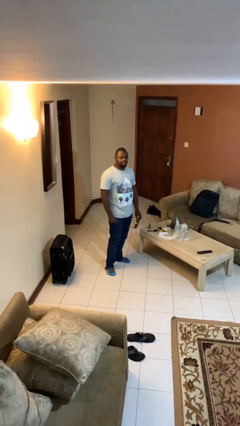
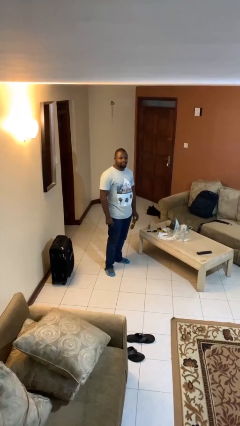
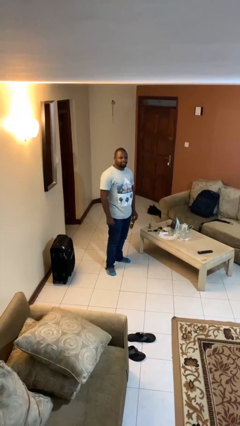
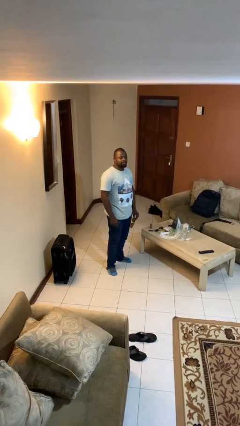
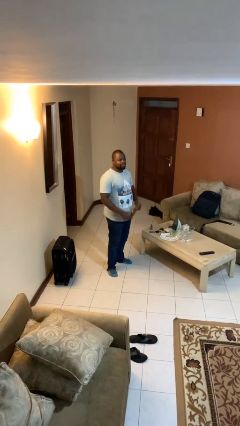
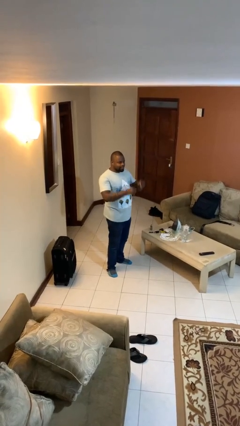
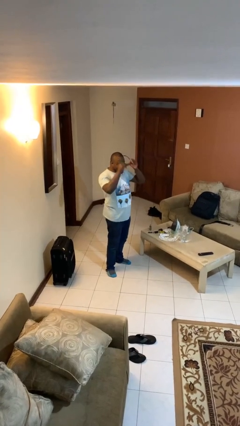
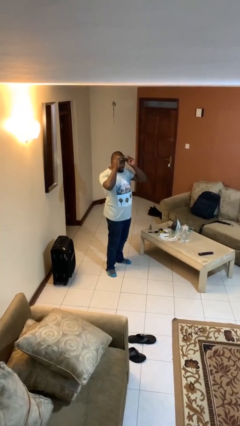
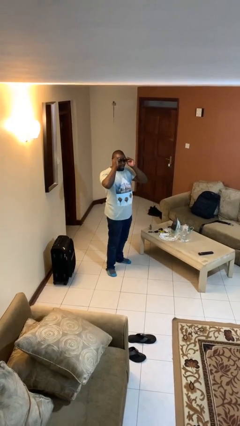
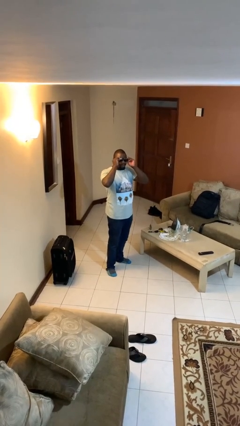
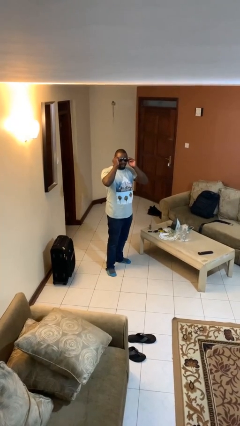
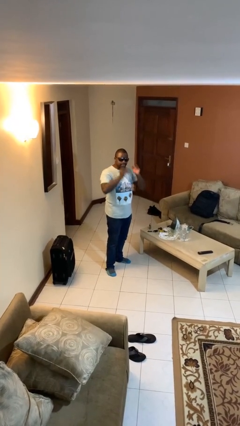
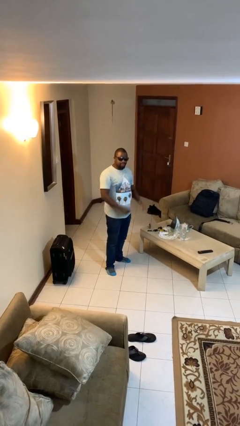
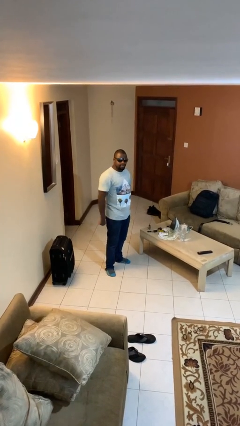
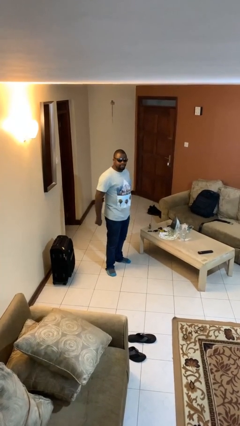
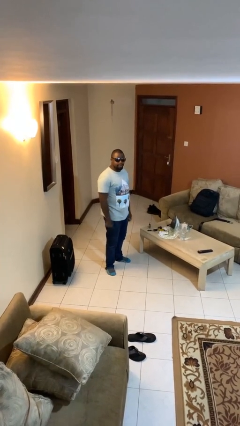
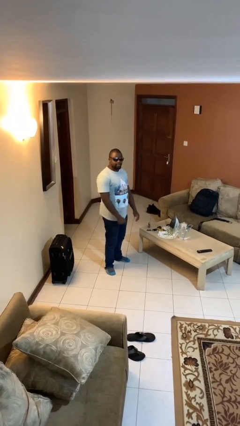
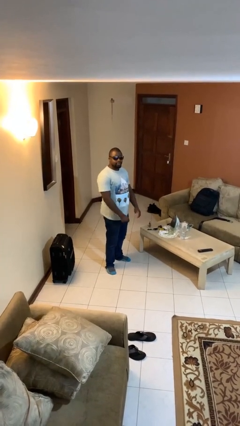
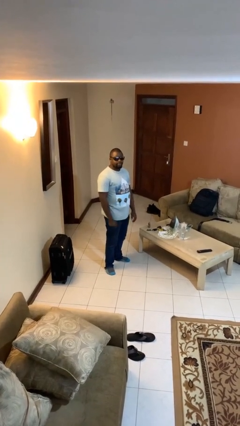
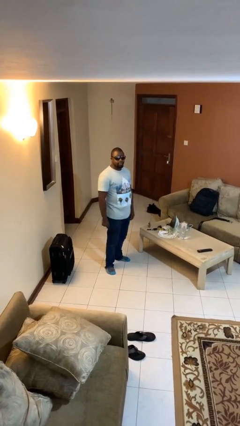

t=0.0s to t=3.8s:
person puts on sunglasses

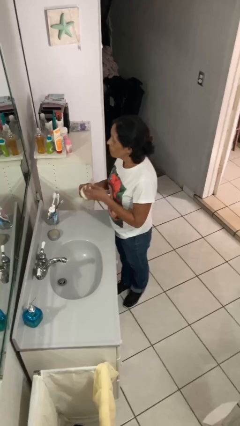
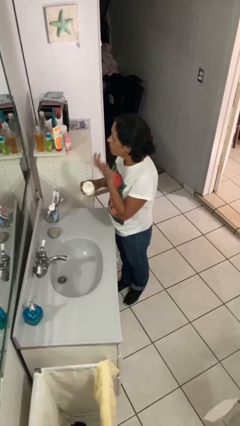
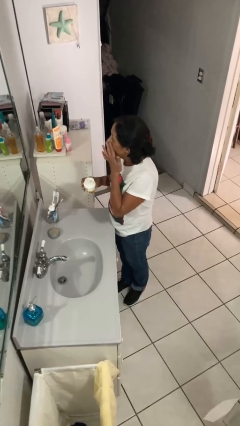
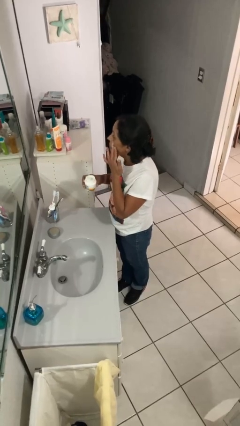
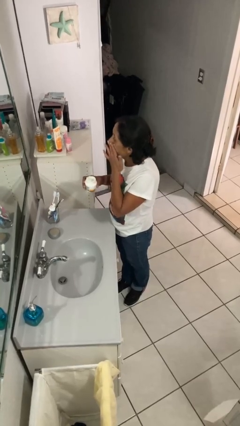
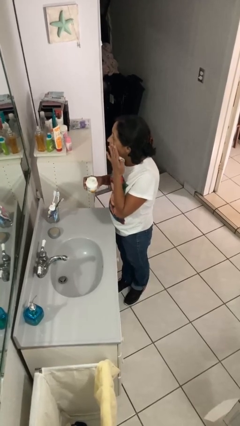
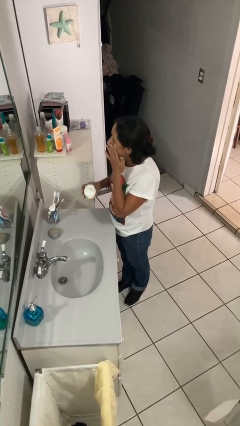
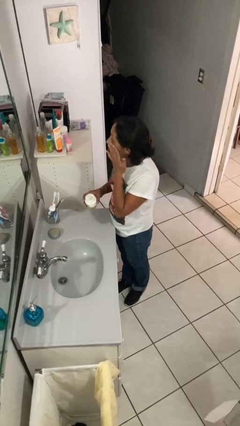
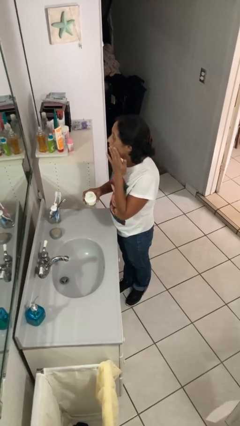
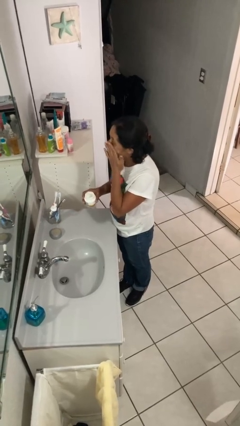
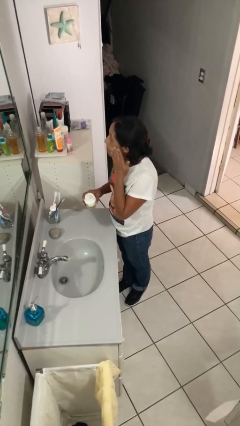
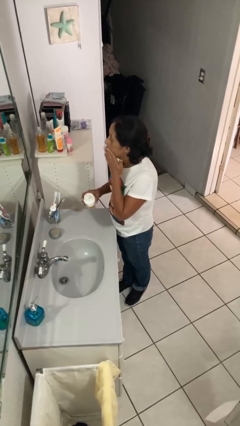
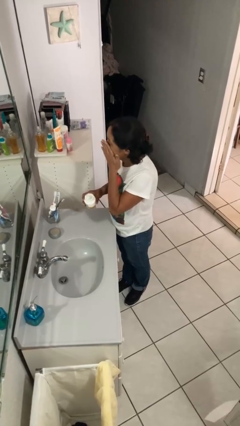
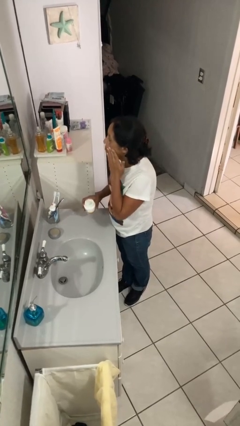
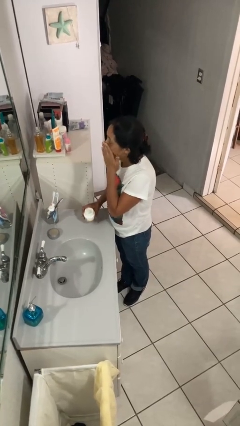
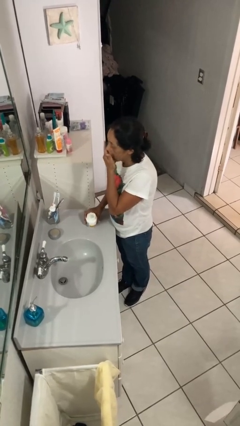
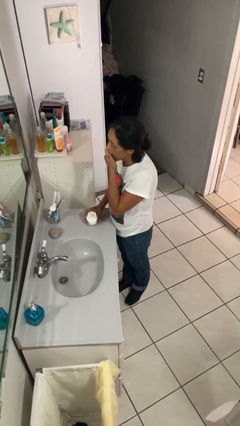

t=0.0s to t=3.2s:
person applies facial moisturizer

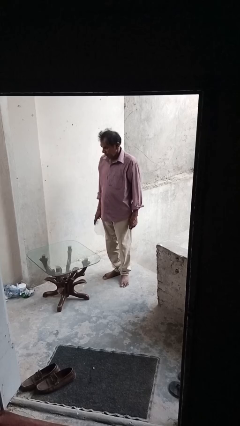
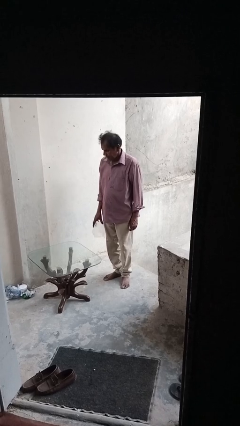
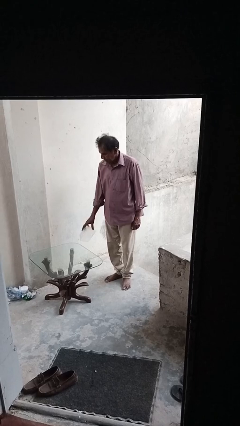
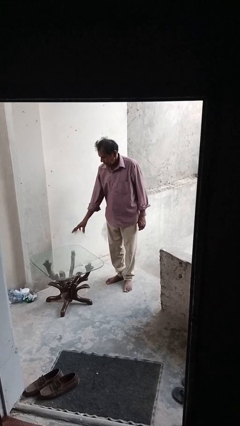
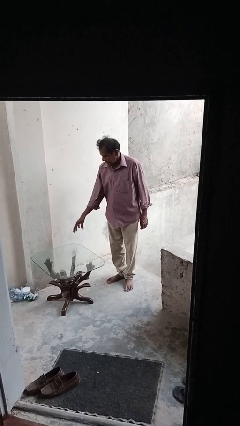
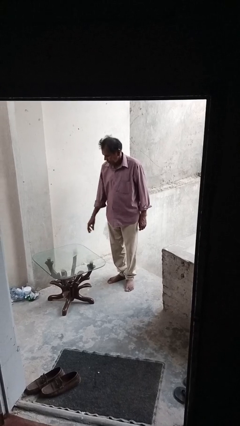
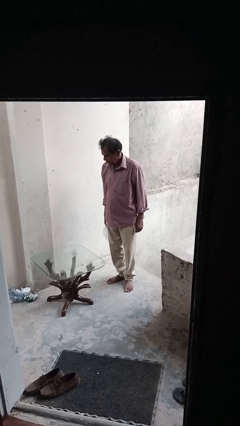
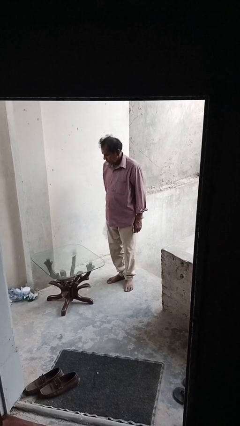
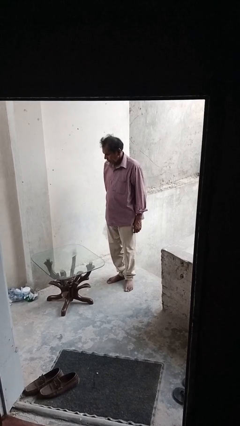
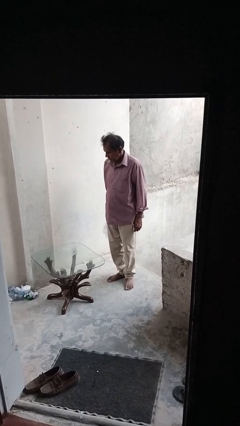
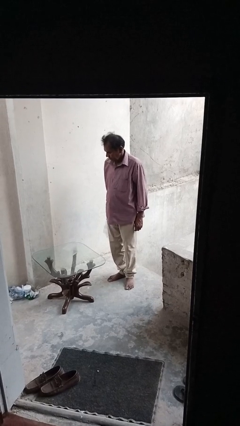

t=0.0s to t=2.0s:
person throws object on table

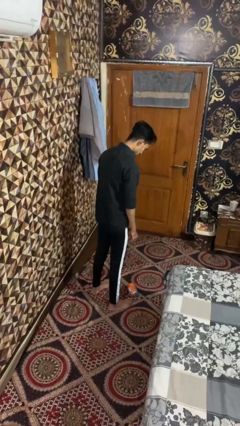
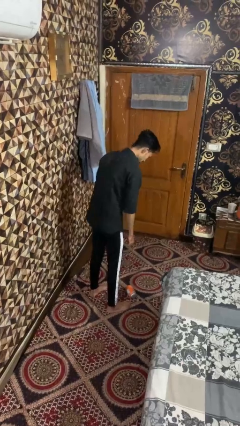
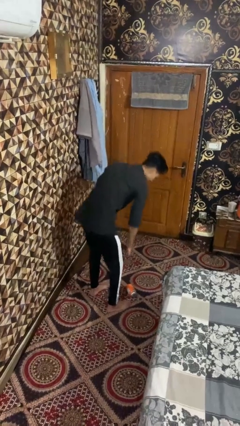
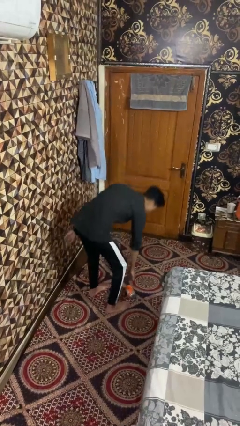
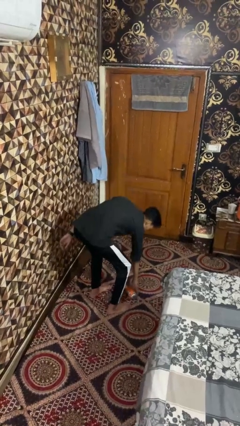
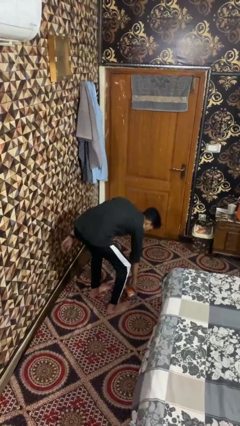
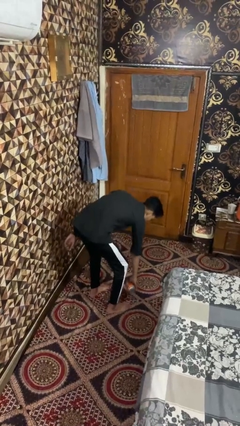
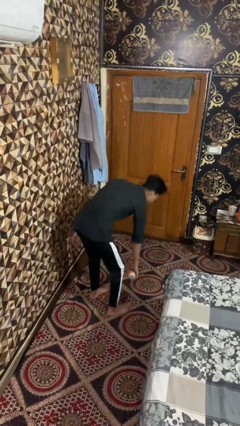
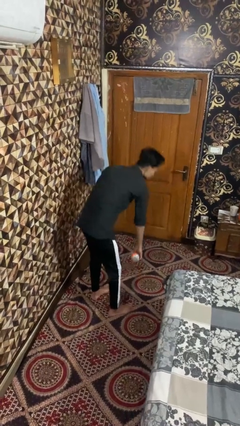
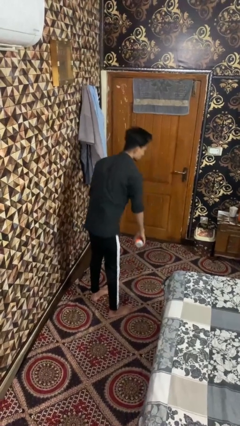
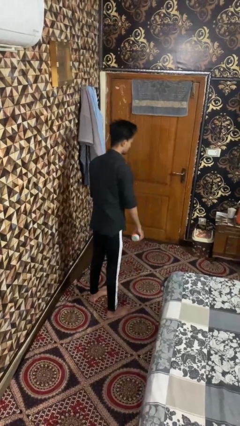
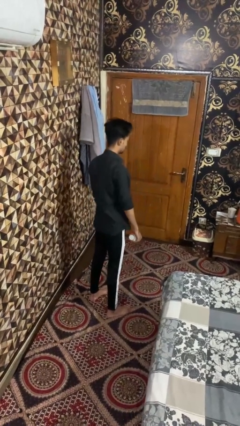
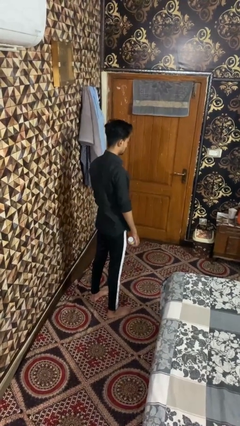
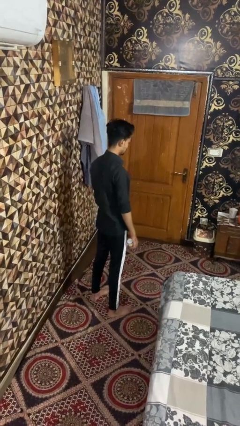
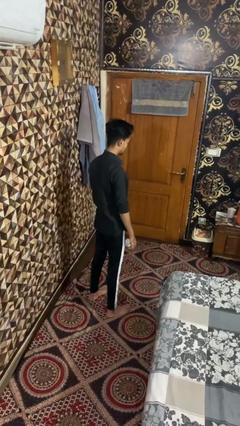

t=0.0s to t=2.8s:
person stands up from floor

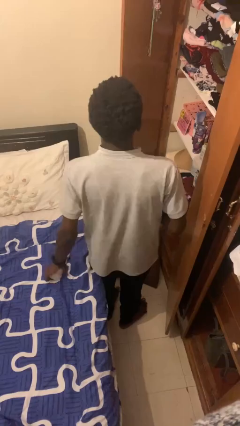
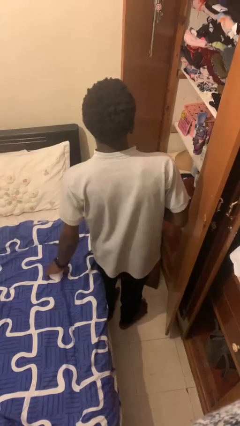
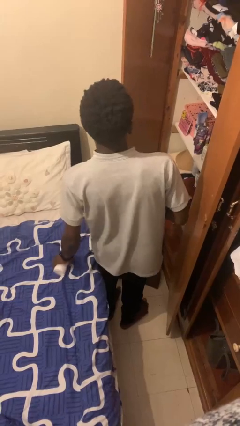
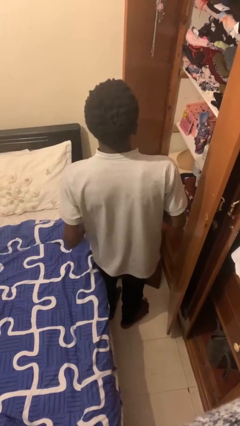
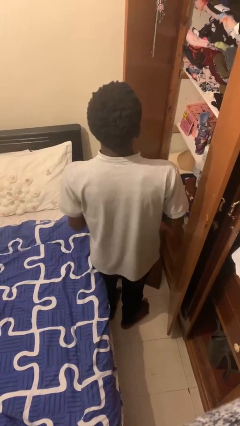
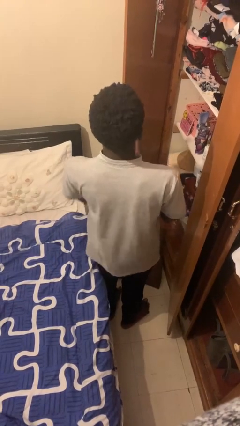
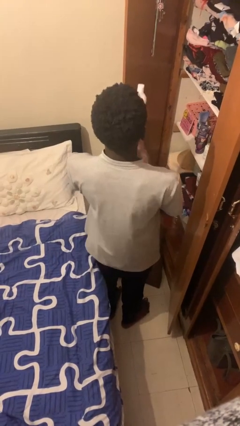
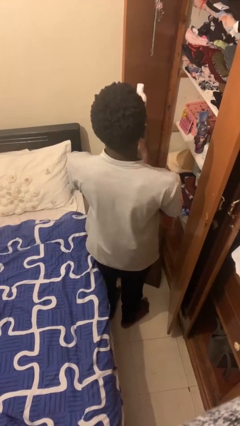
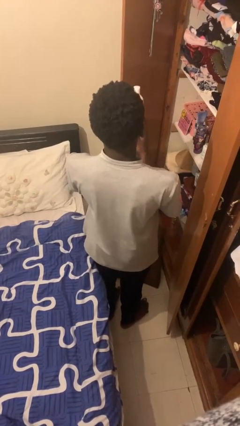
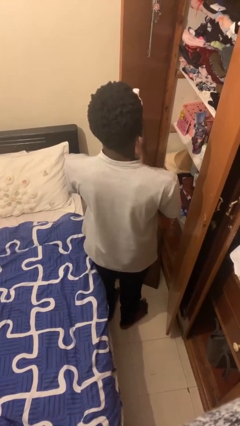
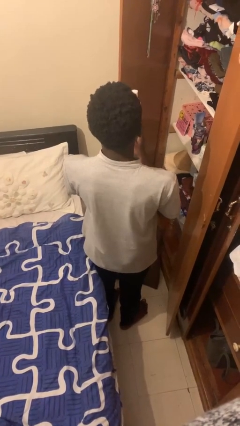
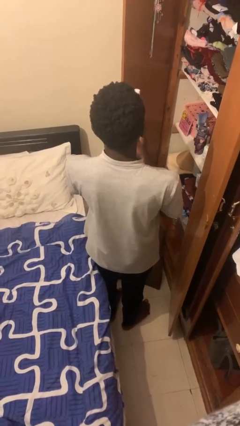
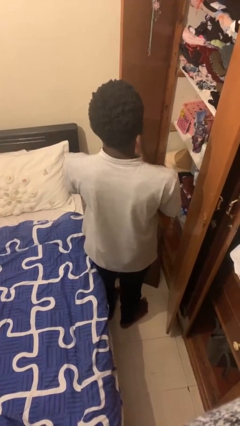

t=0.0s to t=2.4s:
person picks up object from cabinet

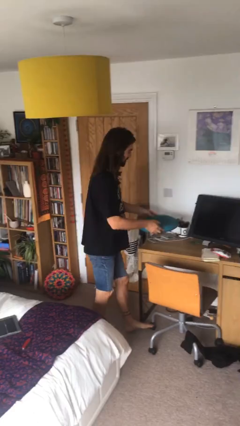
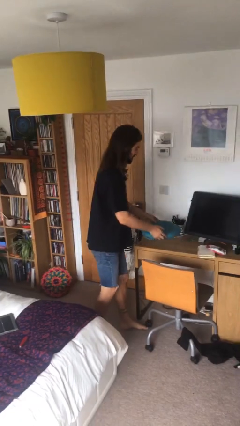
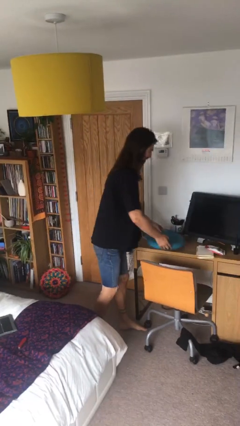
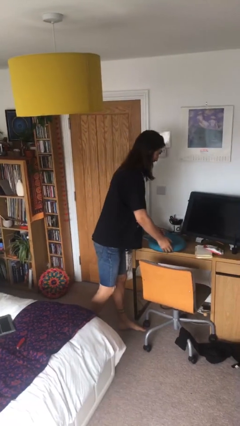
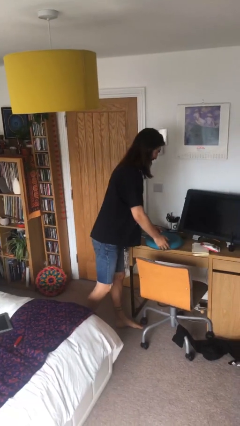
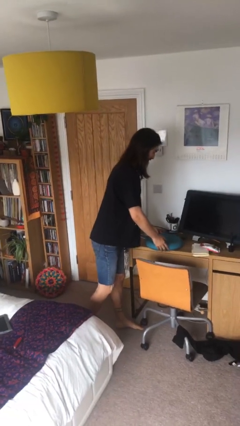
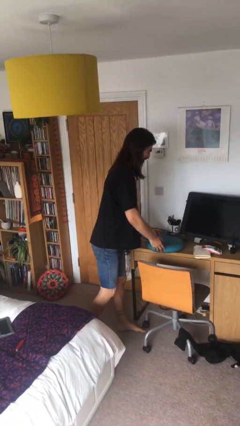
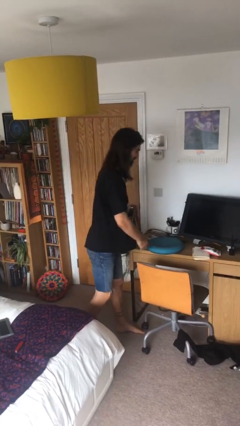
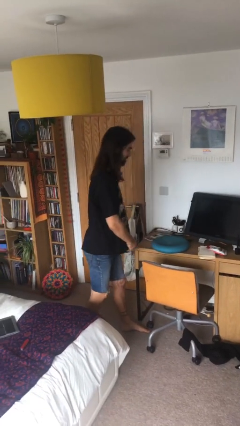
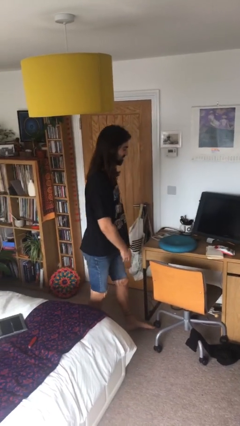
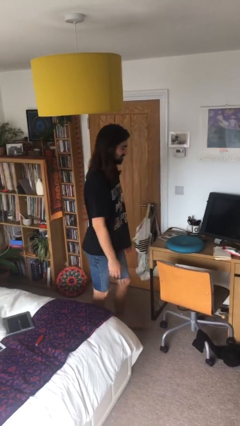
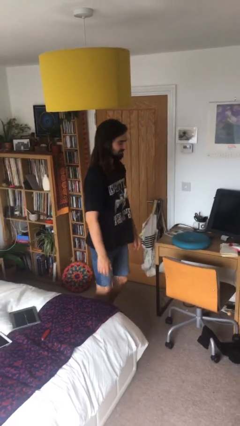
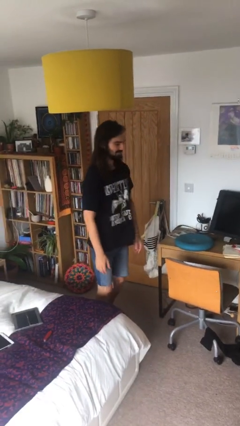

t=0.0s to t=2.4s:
person puts down object on table

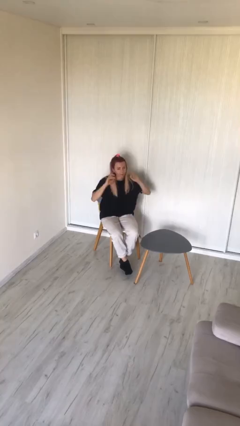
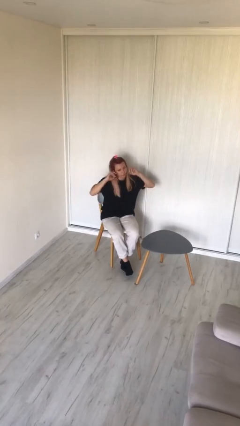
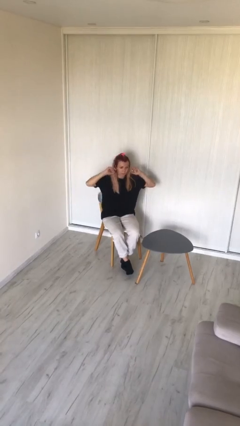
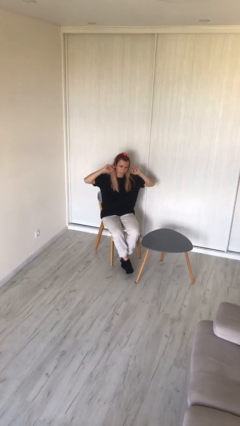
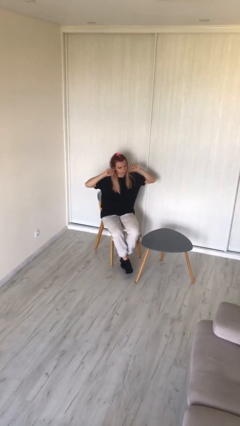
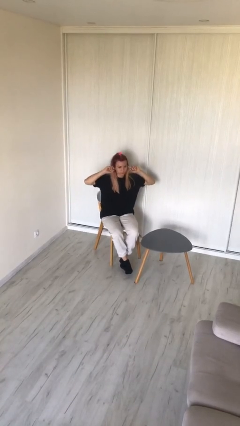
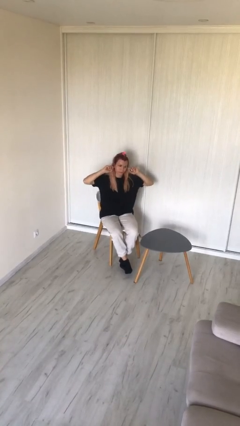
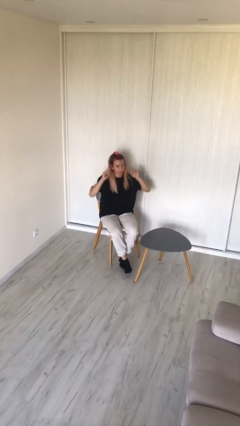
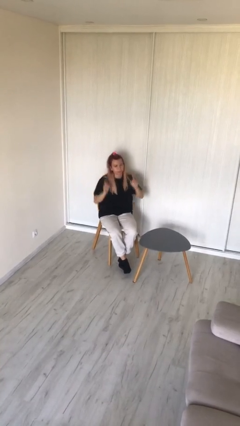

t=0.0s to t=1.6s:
person puts fingers in ear
